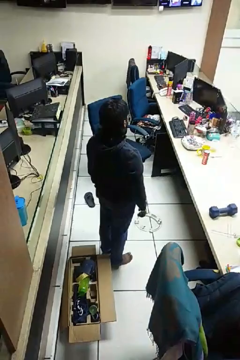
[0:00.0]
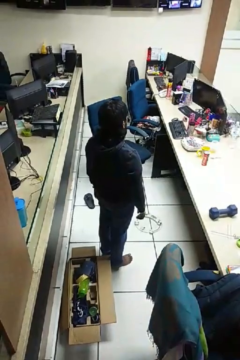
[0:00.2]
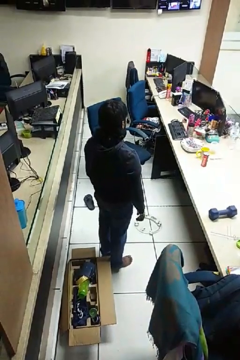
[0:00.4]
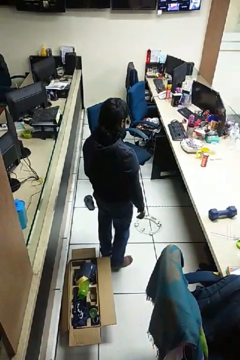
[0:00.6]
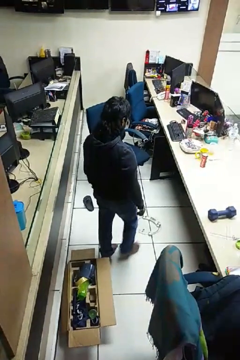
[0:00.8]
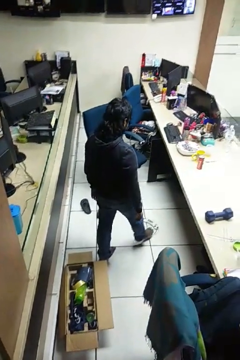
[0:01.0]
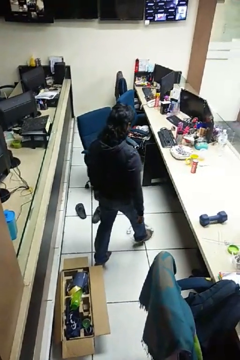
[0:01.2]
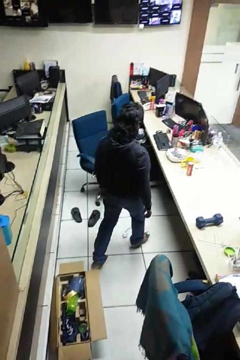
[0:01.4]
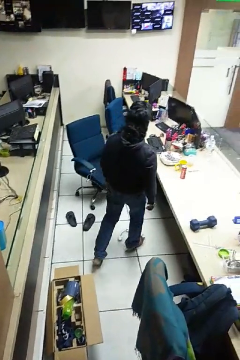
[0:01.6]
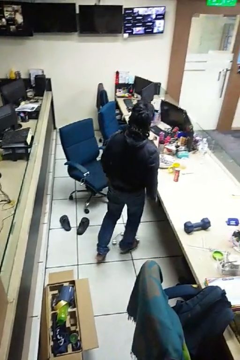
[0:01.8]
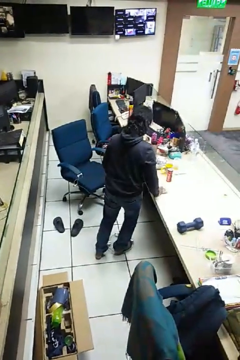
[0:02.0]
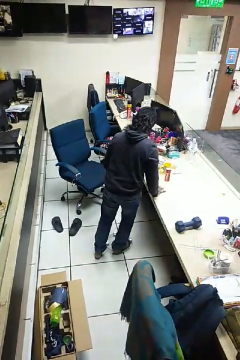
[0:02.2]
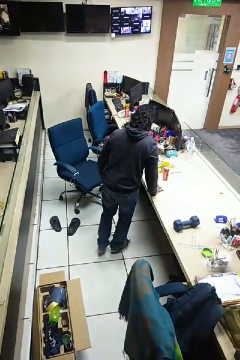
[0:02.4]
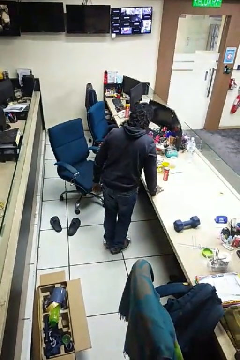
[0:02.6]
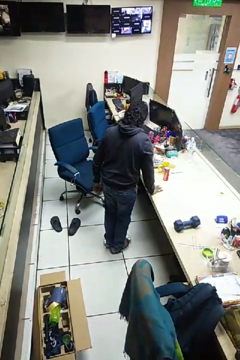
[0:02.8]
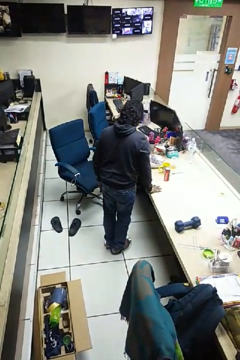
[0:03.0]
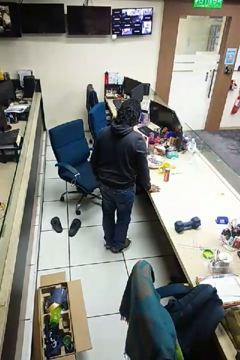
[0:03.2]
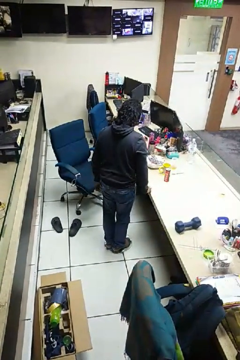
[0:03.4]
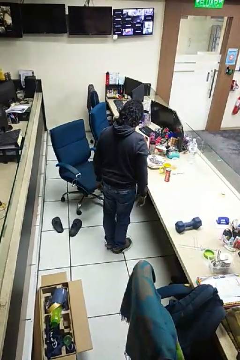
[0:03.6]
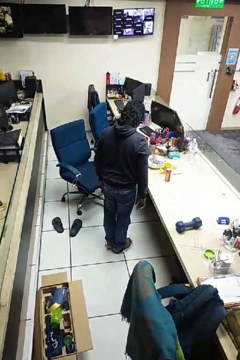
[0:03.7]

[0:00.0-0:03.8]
person uses bodyweight scale

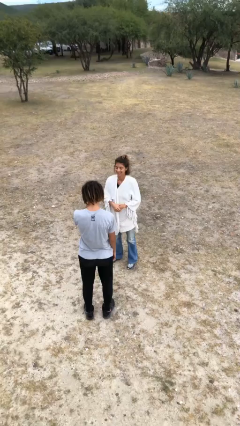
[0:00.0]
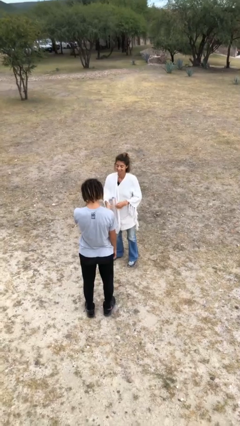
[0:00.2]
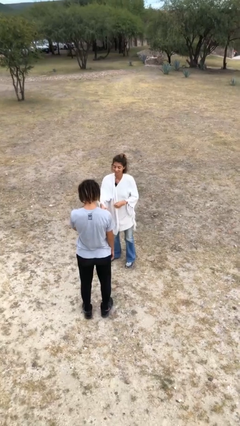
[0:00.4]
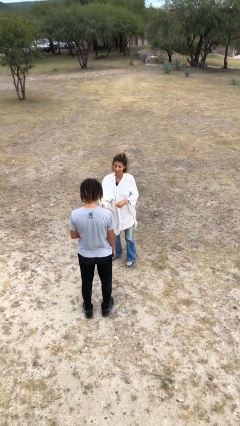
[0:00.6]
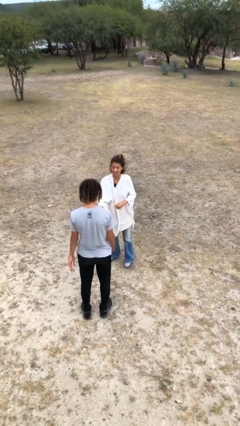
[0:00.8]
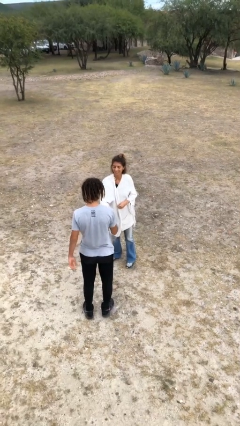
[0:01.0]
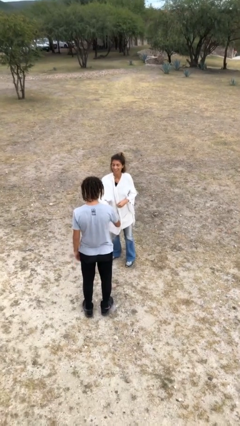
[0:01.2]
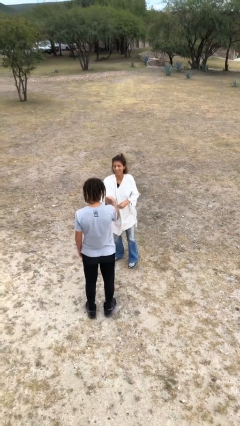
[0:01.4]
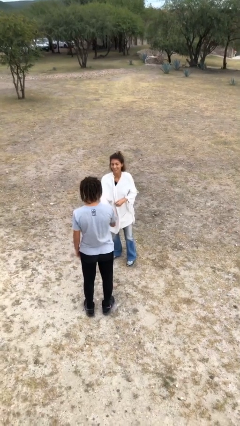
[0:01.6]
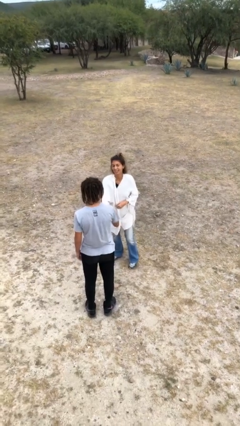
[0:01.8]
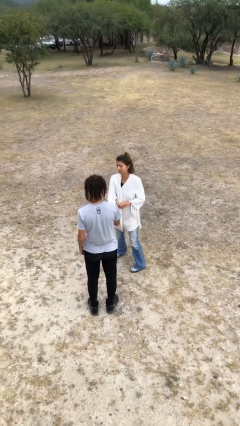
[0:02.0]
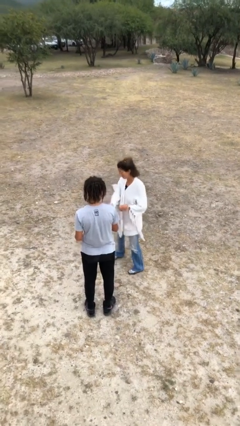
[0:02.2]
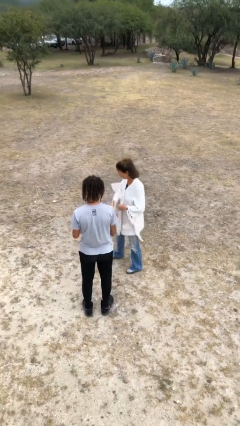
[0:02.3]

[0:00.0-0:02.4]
person shakes hand

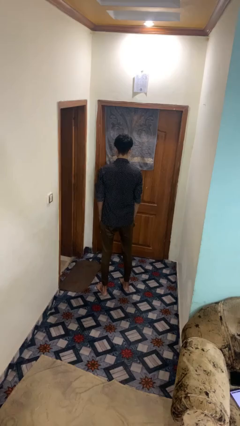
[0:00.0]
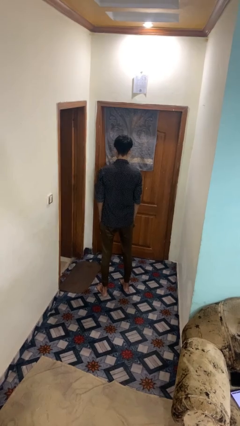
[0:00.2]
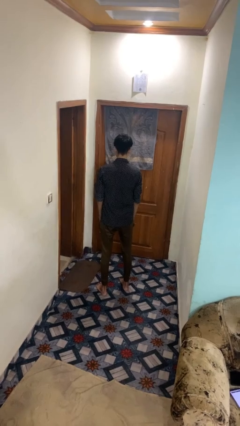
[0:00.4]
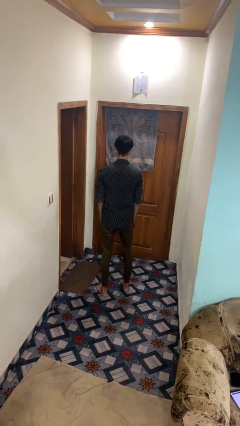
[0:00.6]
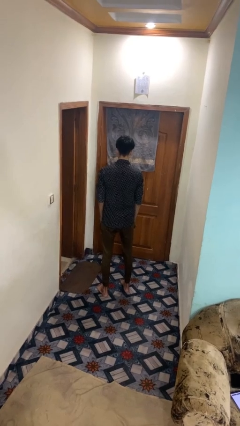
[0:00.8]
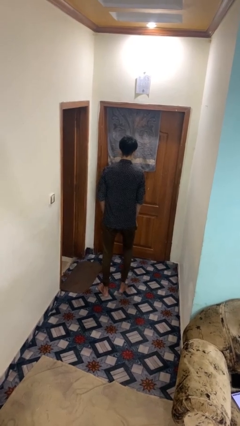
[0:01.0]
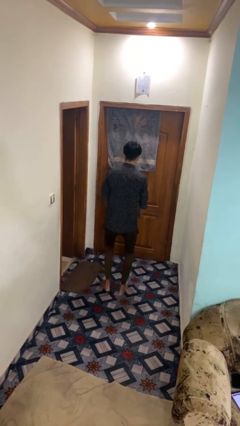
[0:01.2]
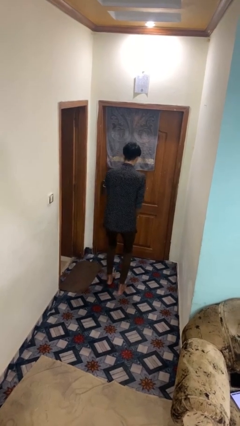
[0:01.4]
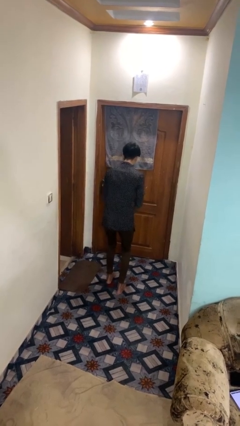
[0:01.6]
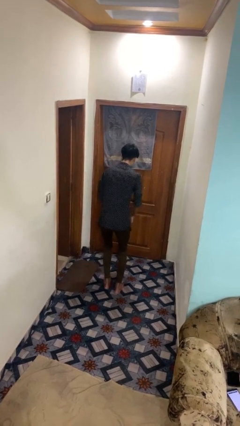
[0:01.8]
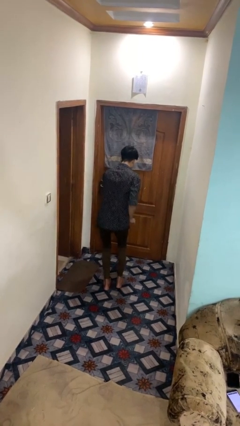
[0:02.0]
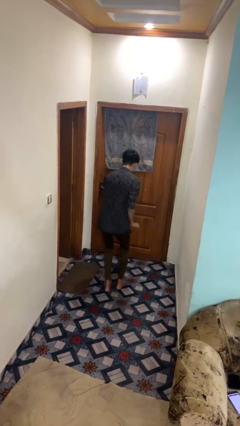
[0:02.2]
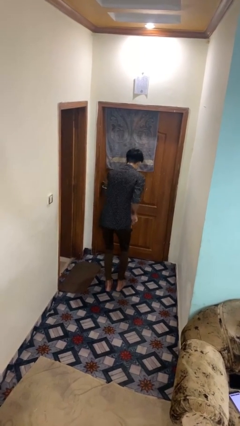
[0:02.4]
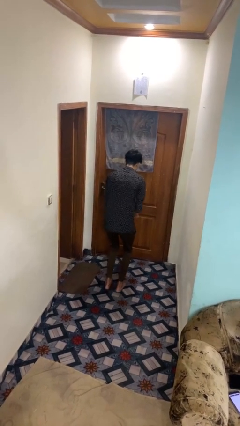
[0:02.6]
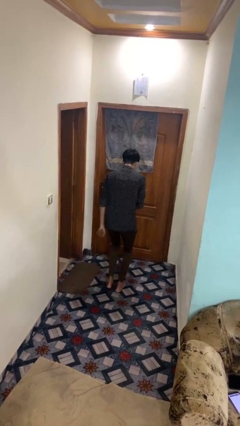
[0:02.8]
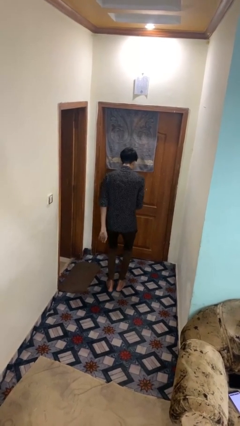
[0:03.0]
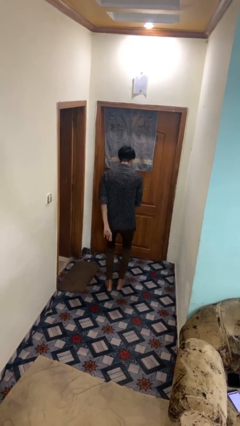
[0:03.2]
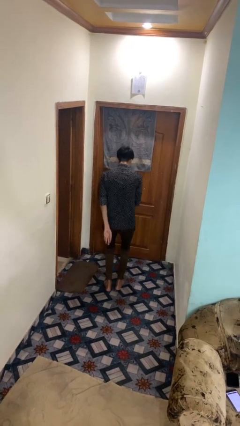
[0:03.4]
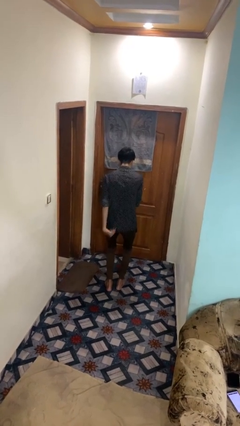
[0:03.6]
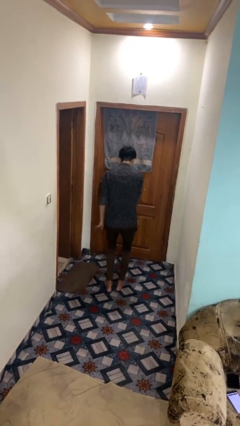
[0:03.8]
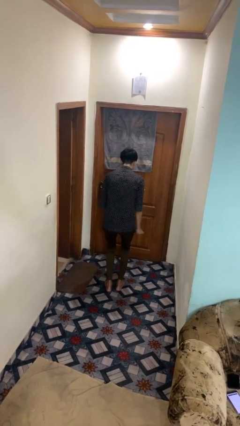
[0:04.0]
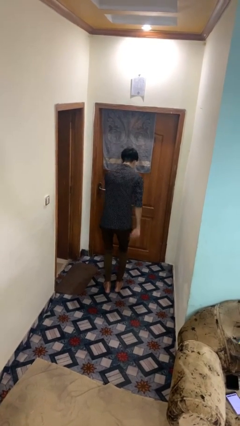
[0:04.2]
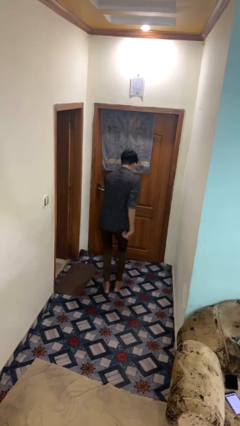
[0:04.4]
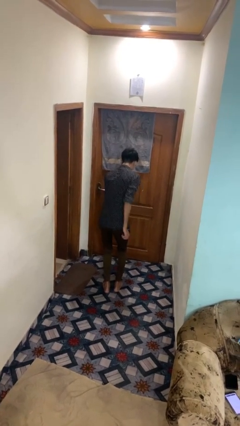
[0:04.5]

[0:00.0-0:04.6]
person dances in place

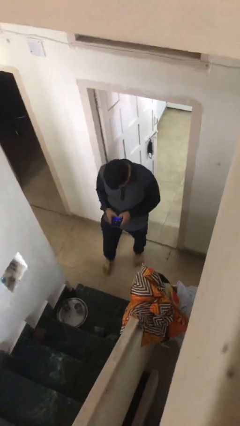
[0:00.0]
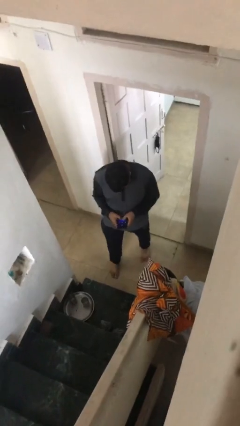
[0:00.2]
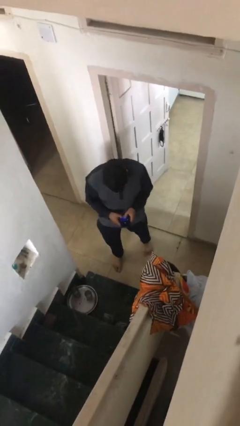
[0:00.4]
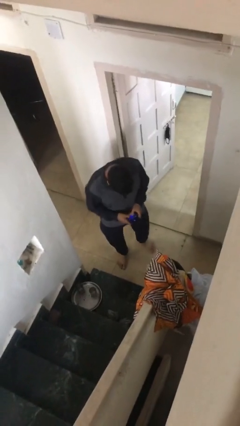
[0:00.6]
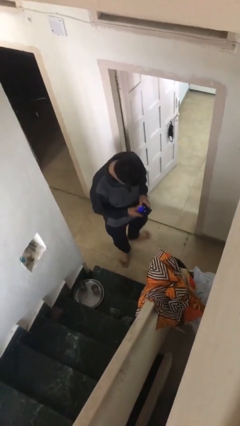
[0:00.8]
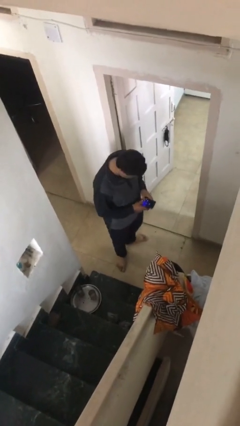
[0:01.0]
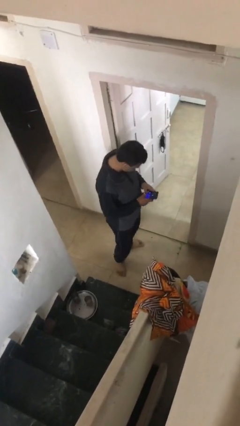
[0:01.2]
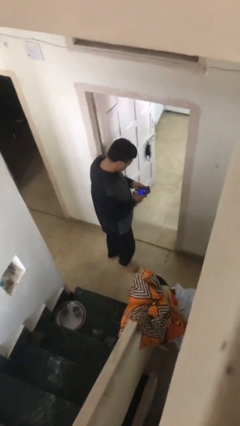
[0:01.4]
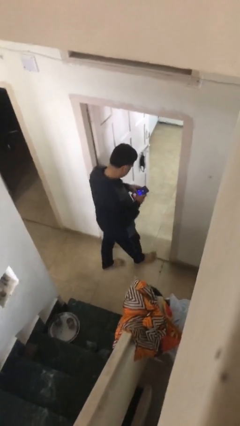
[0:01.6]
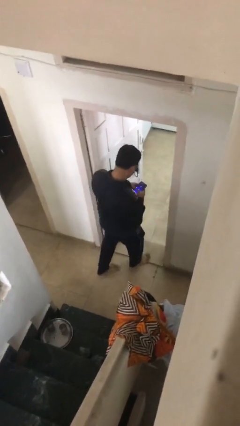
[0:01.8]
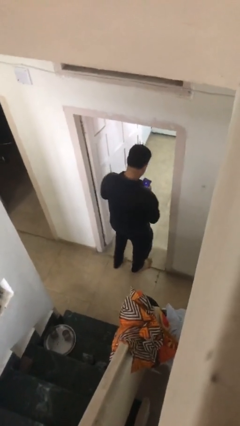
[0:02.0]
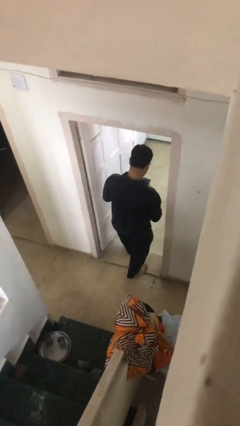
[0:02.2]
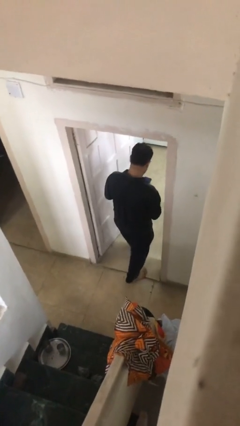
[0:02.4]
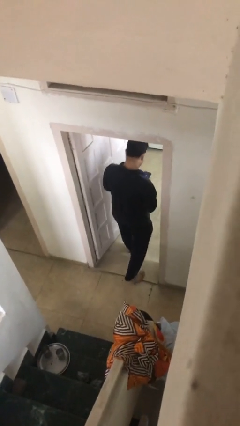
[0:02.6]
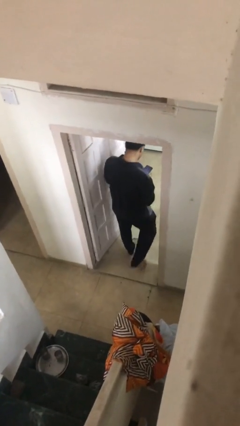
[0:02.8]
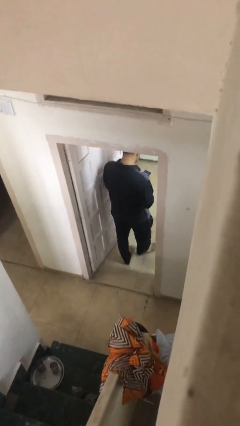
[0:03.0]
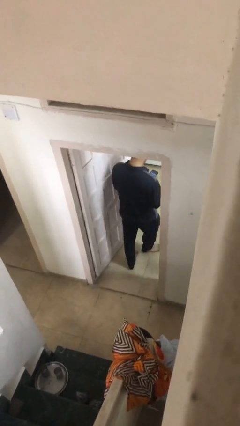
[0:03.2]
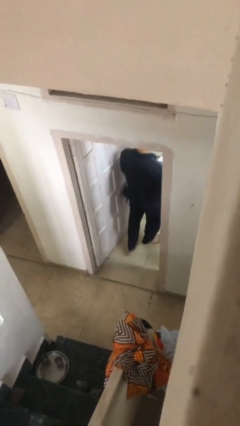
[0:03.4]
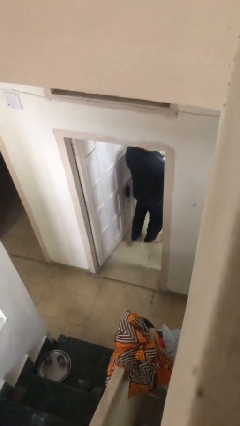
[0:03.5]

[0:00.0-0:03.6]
person exits scene through structure

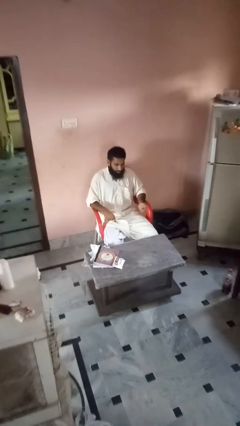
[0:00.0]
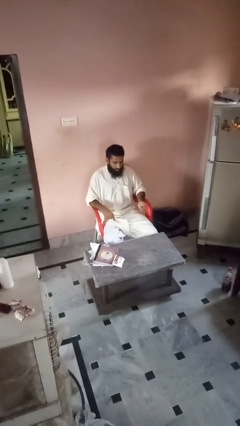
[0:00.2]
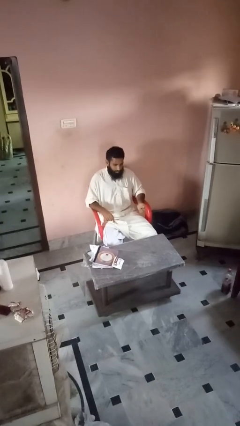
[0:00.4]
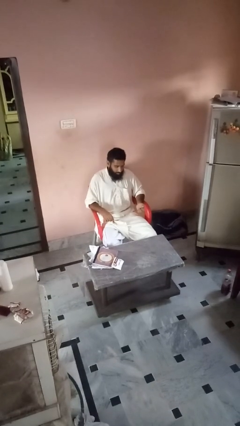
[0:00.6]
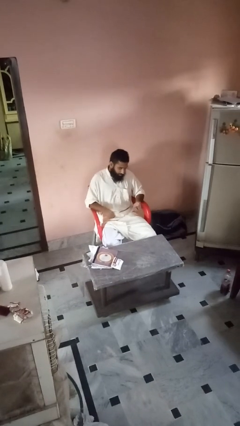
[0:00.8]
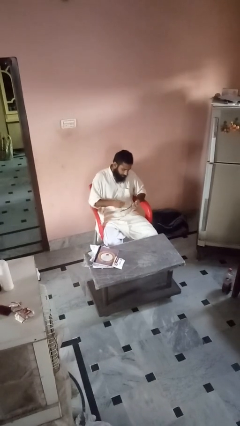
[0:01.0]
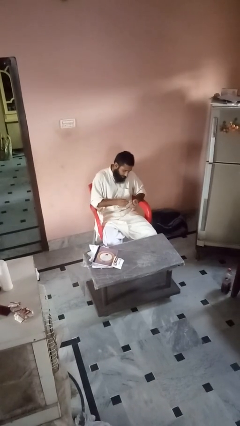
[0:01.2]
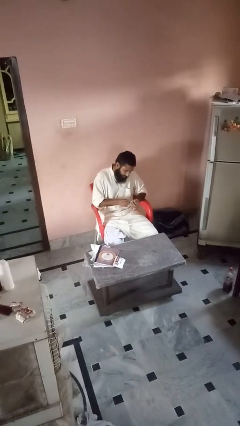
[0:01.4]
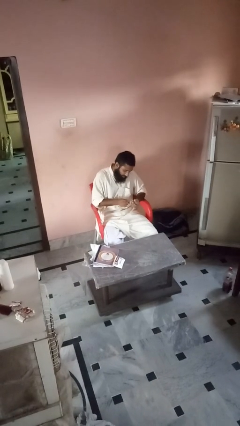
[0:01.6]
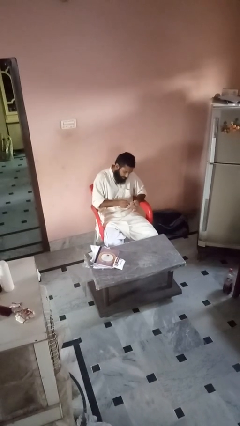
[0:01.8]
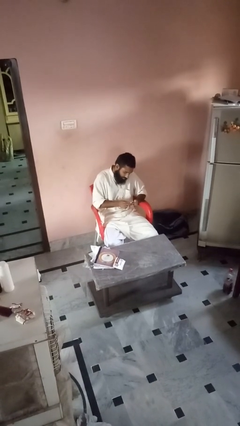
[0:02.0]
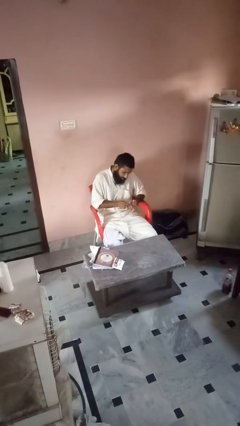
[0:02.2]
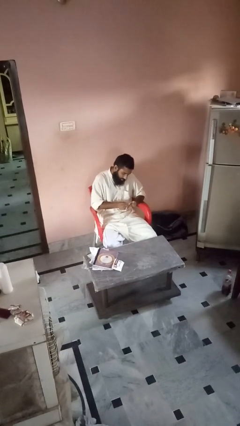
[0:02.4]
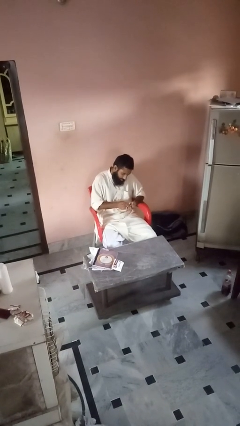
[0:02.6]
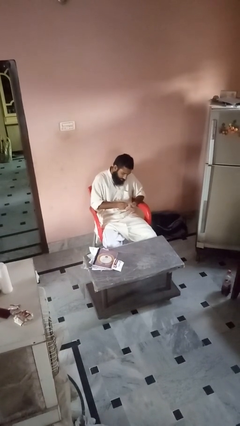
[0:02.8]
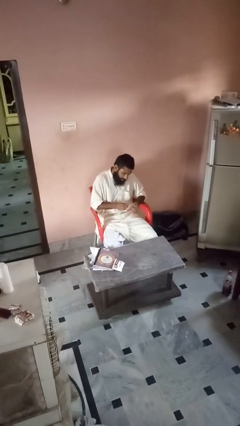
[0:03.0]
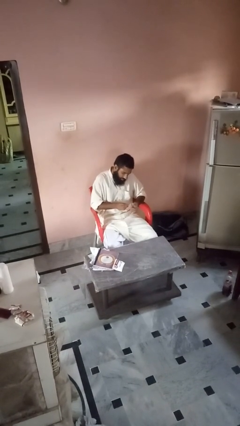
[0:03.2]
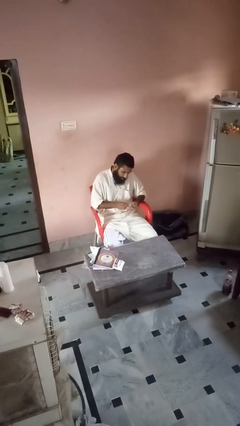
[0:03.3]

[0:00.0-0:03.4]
person files fingernails

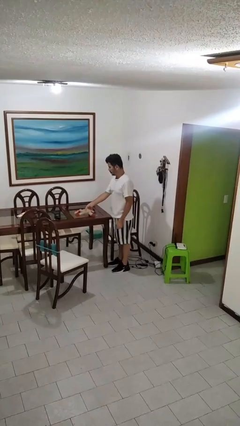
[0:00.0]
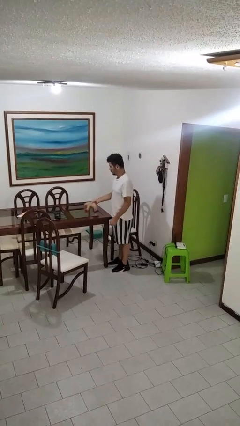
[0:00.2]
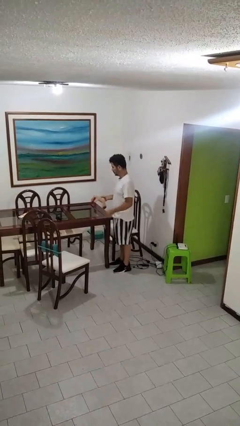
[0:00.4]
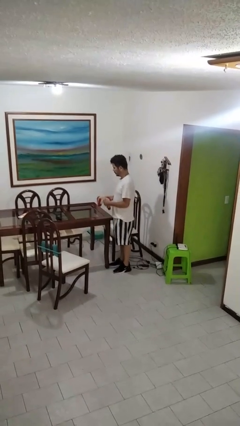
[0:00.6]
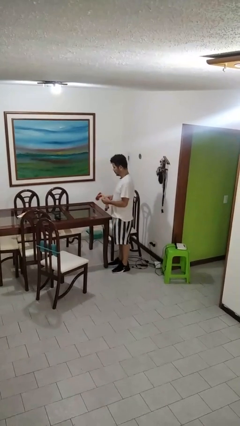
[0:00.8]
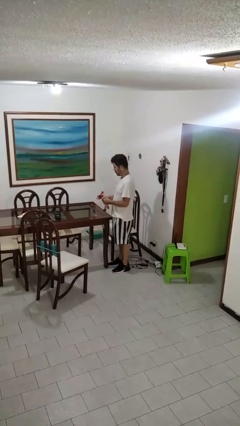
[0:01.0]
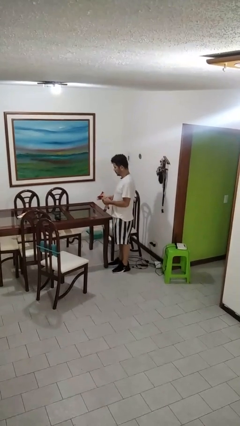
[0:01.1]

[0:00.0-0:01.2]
person picks up object from table
